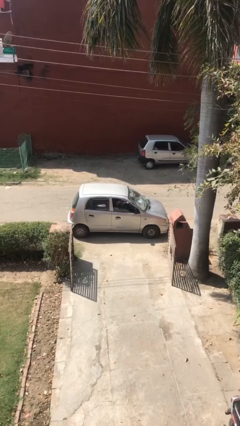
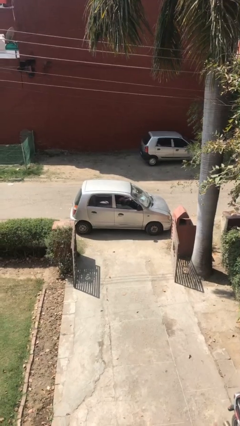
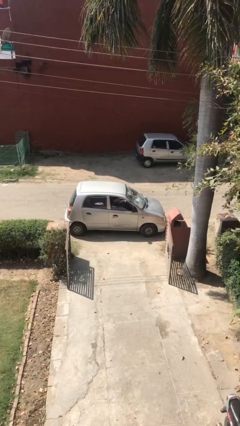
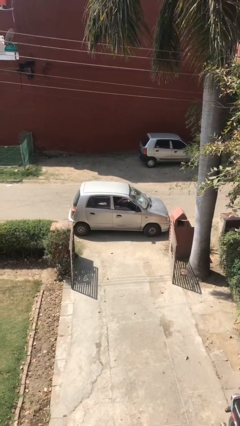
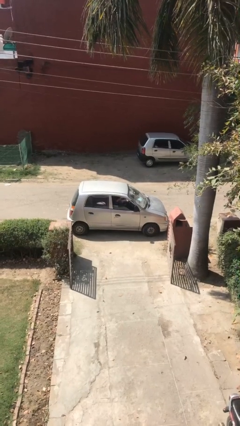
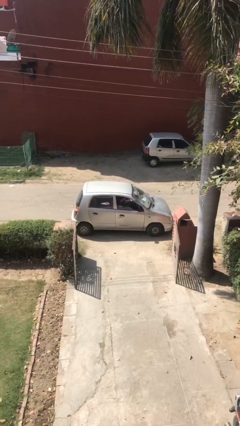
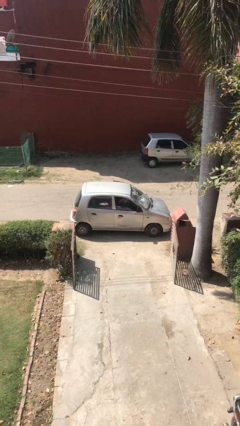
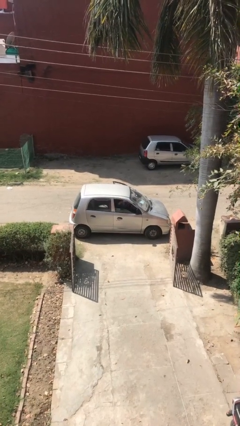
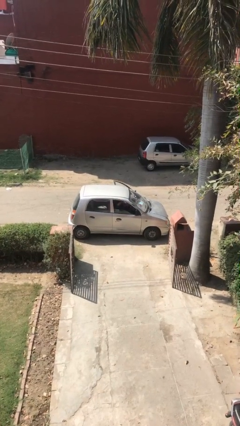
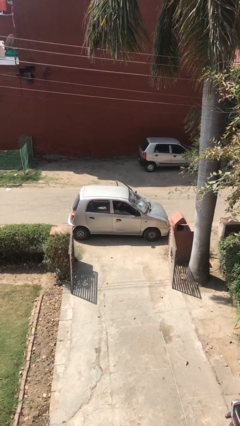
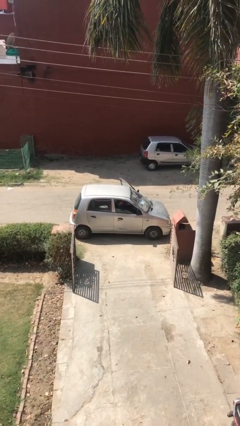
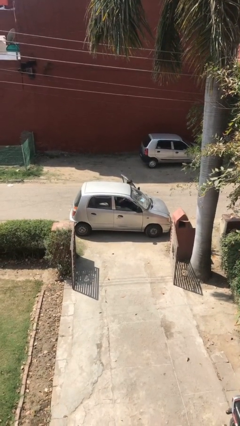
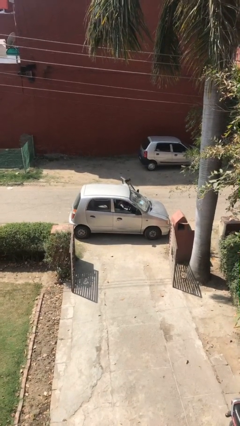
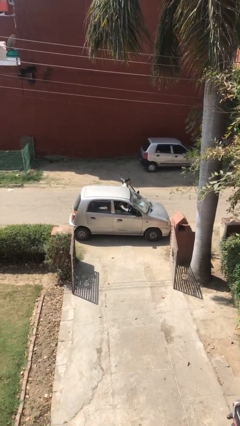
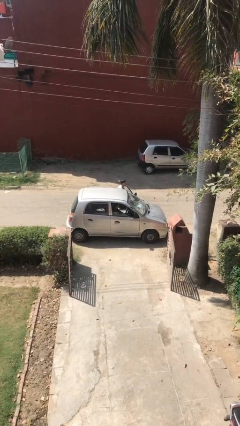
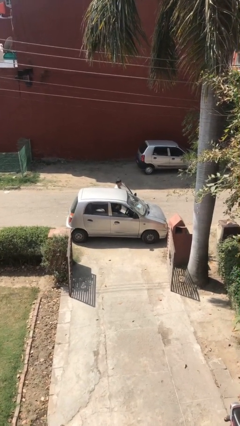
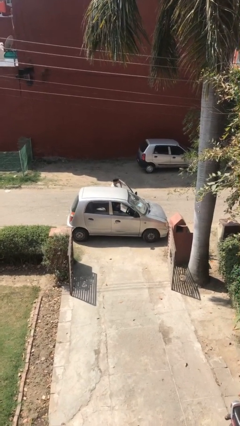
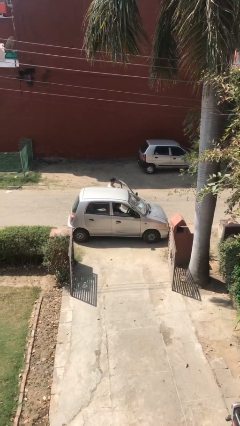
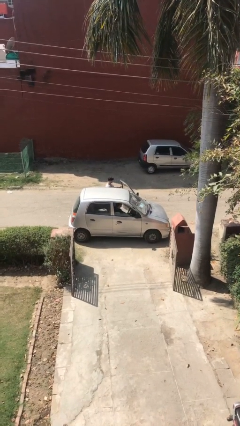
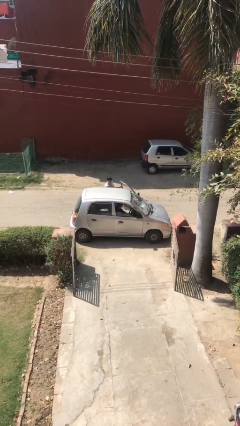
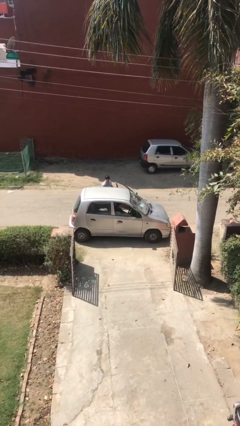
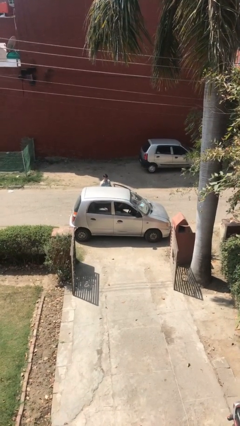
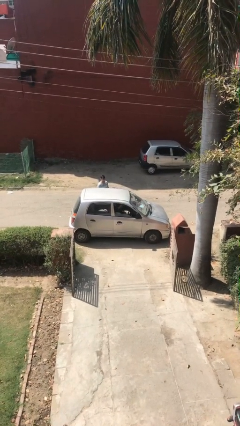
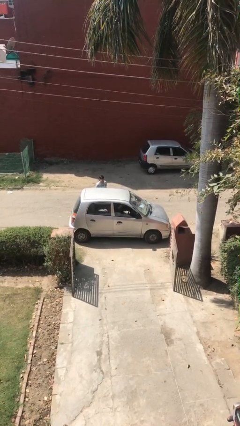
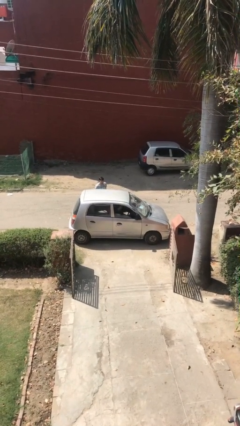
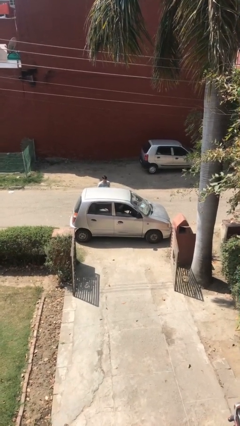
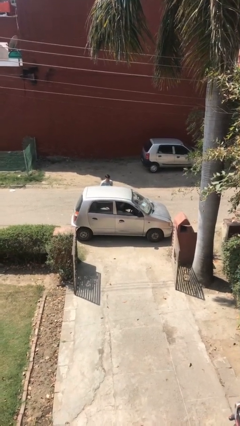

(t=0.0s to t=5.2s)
car drops off person

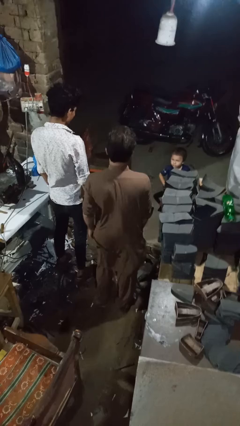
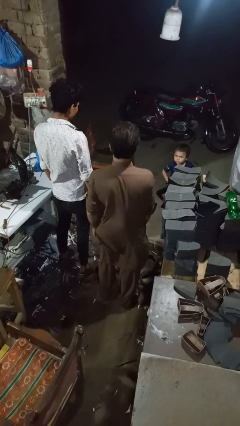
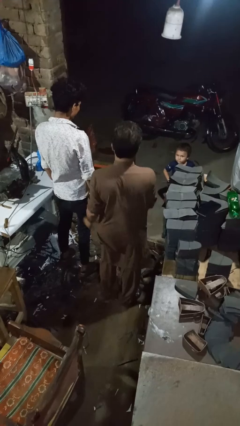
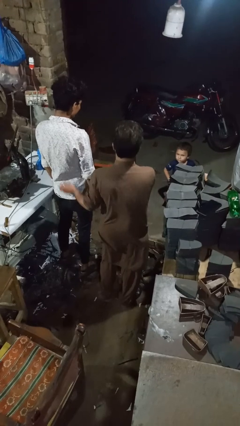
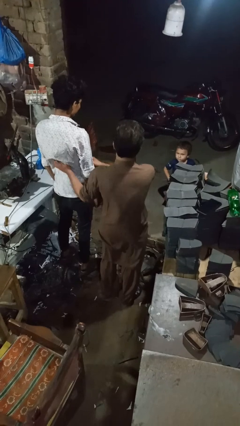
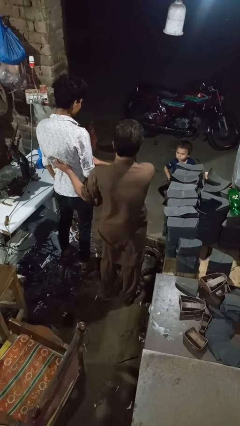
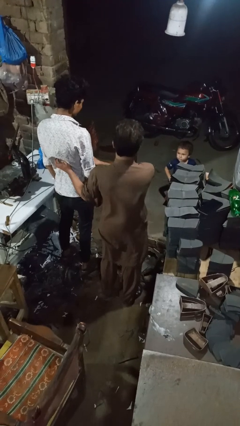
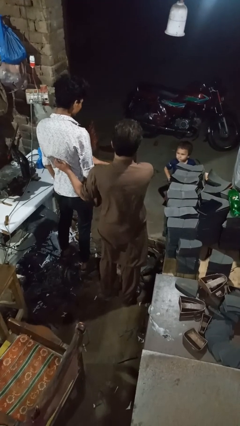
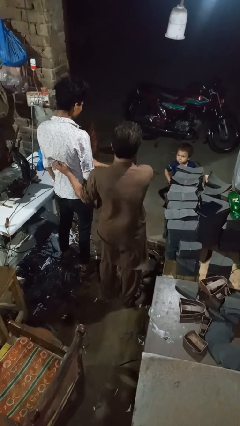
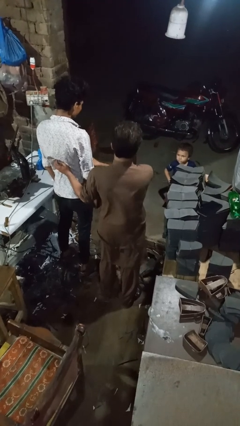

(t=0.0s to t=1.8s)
person tickles person

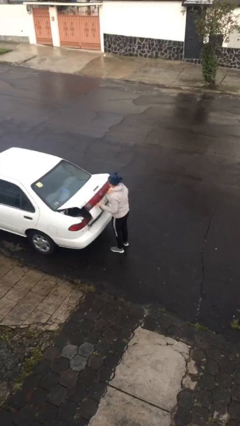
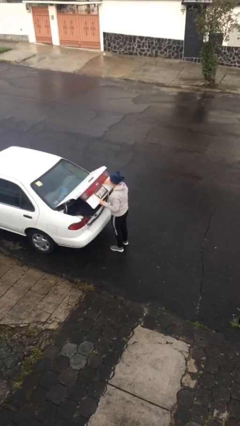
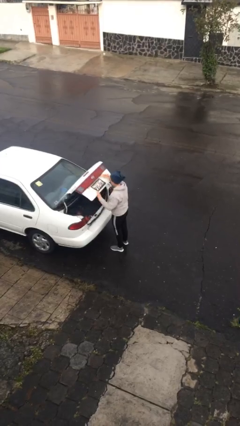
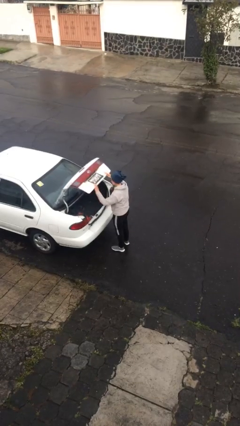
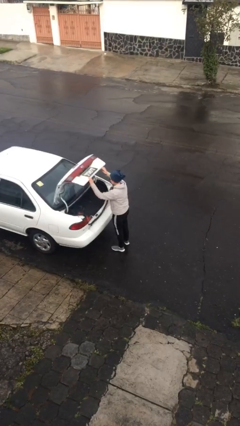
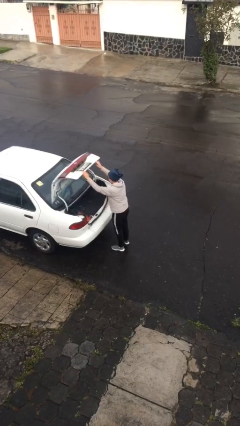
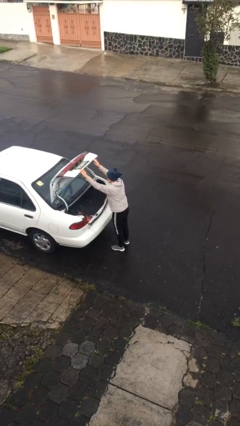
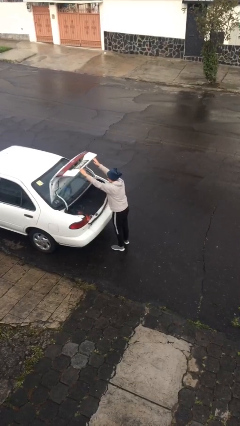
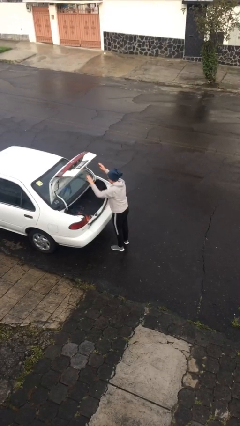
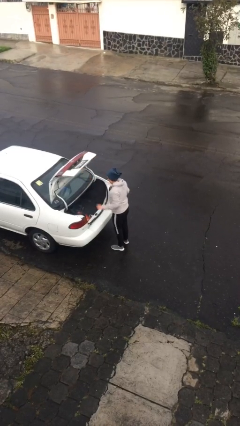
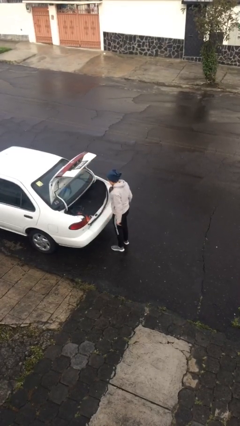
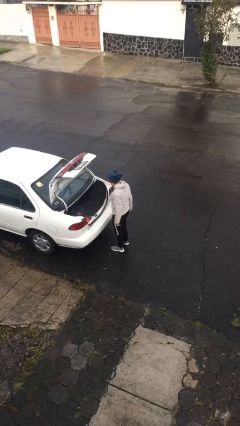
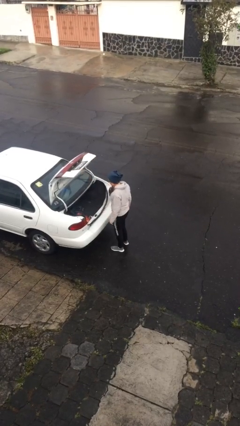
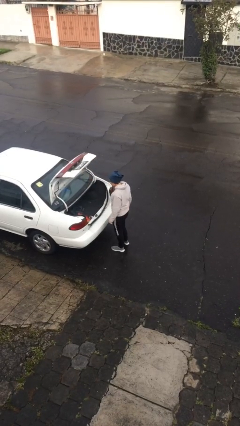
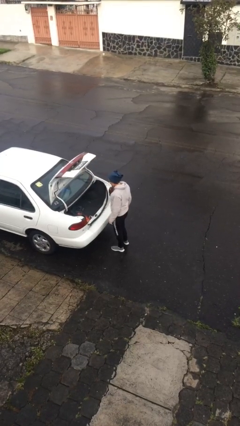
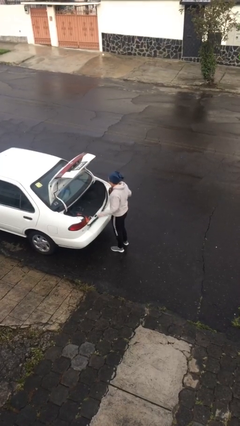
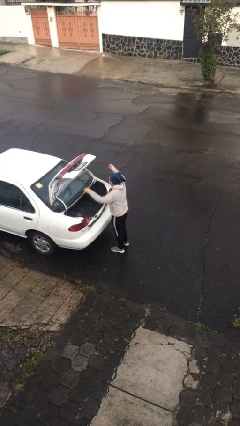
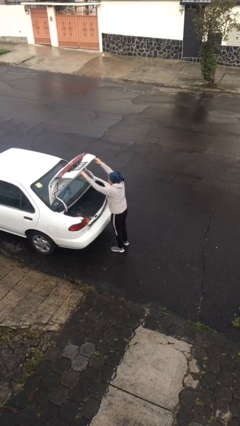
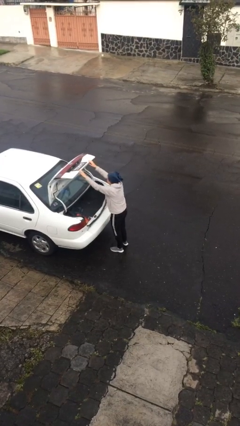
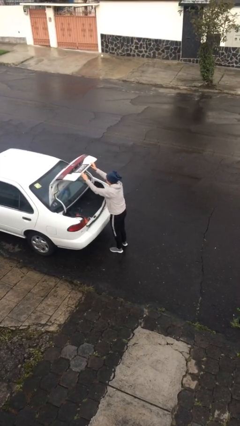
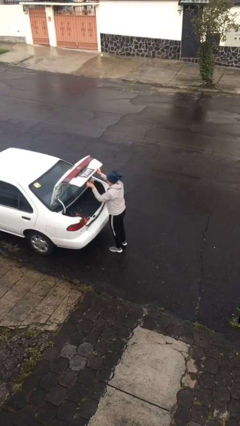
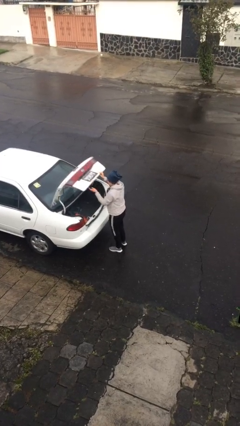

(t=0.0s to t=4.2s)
person opens car trunk

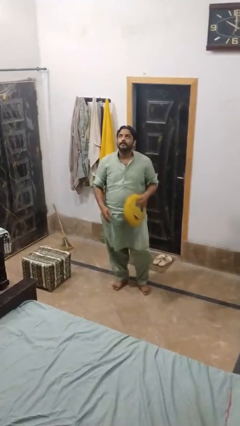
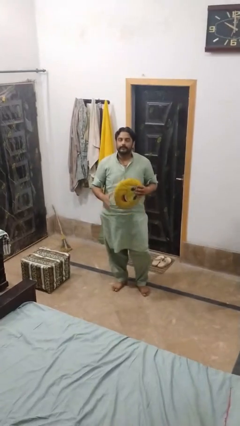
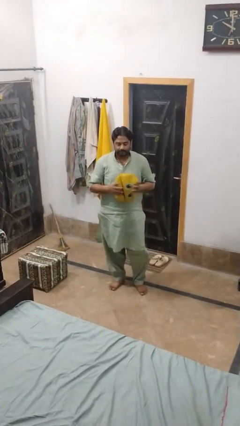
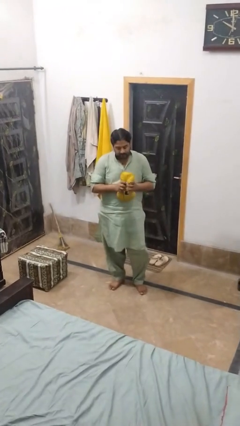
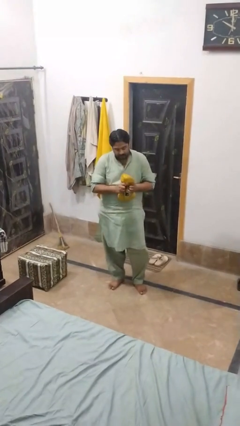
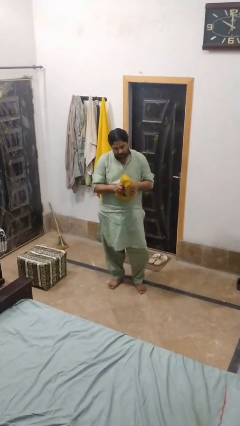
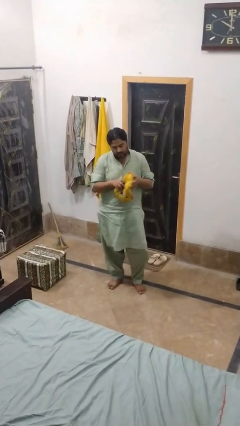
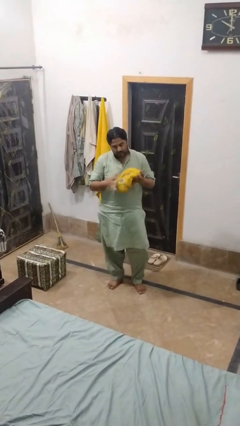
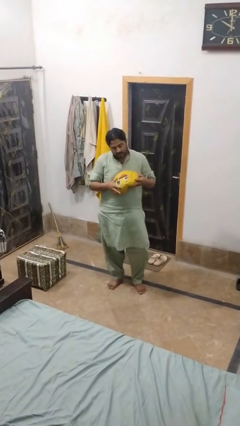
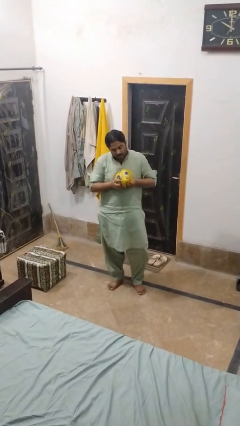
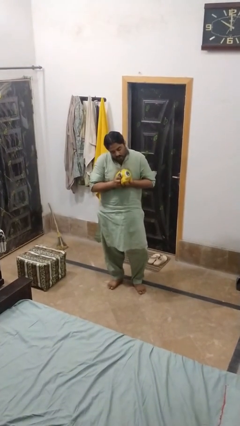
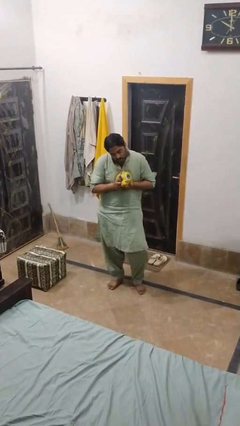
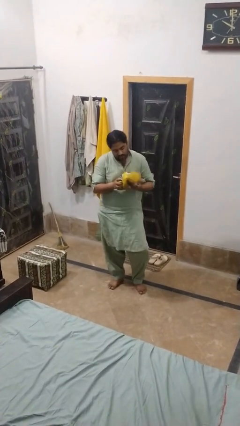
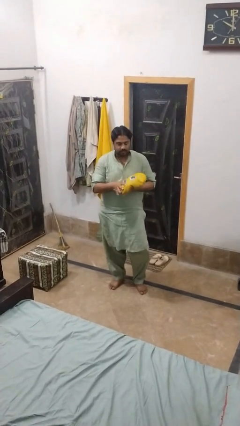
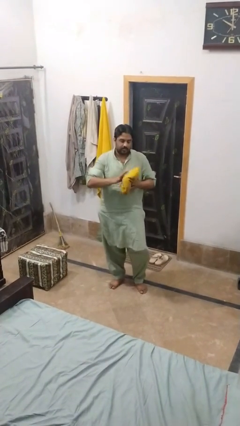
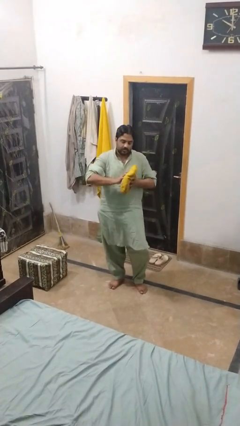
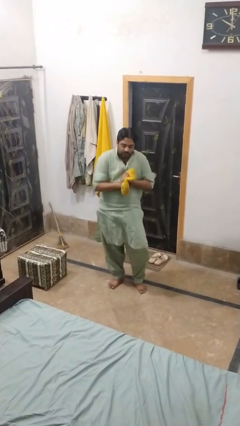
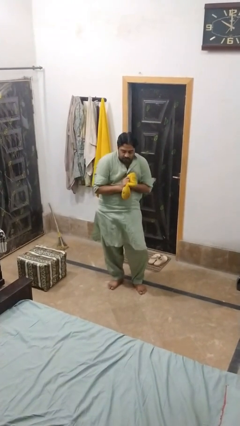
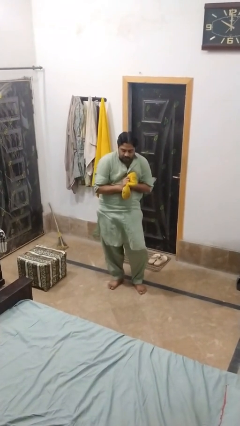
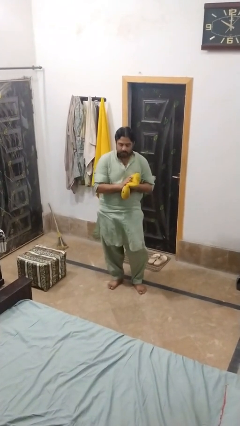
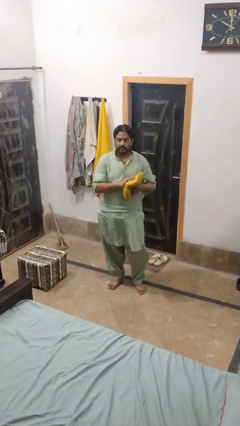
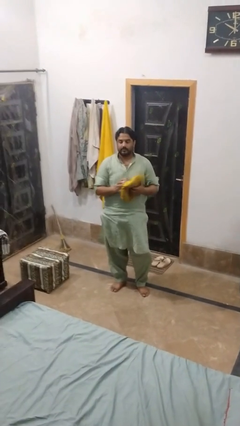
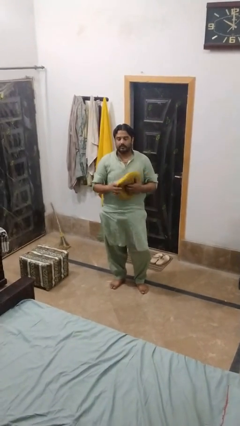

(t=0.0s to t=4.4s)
person squeezes object

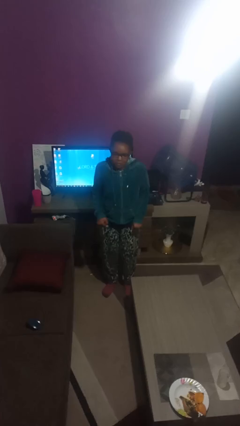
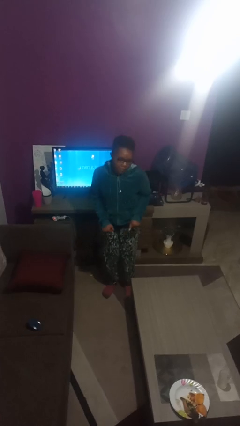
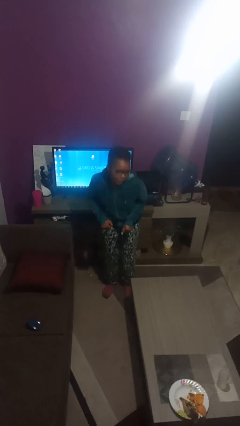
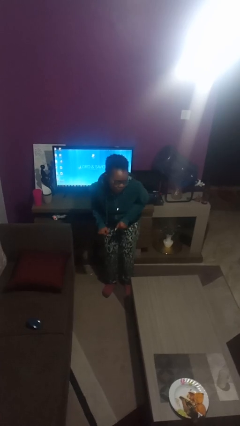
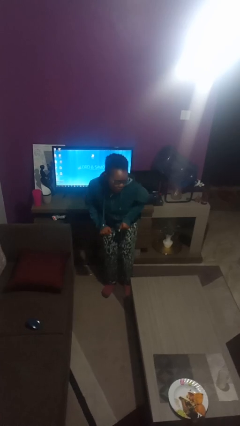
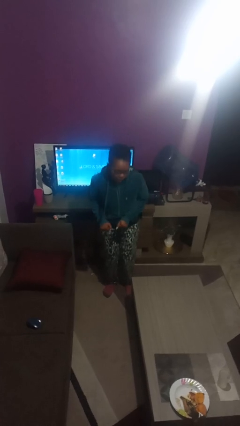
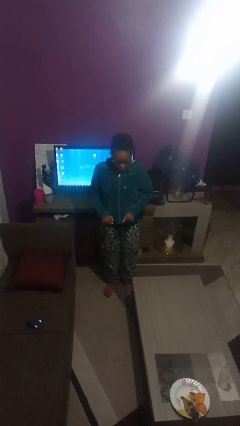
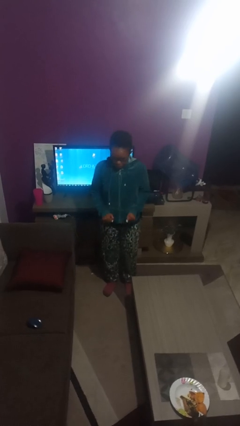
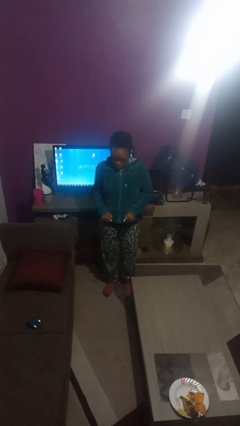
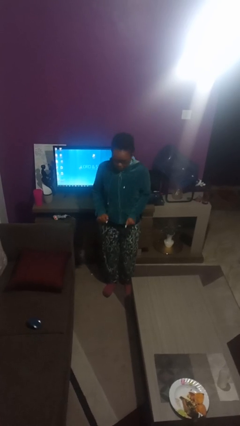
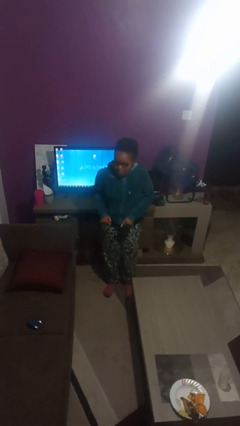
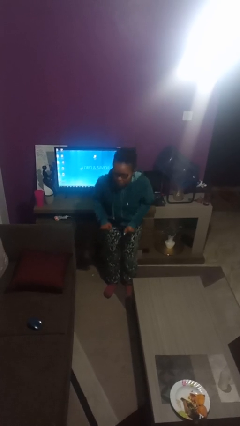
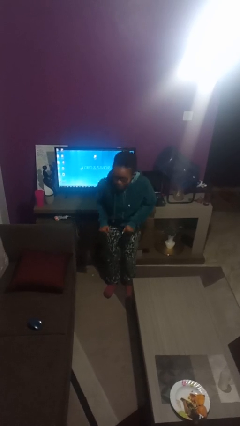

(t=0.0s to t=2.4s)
person dances in place
